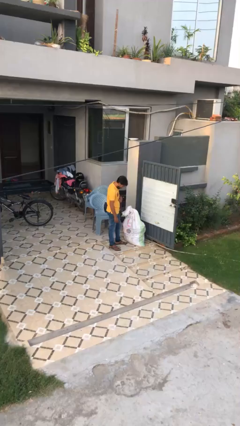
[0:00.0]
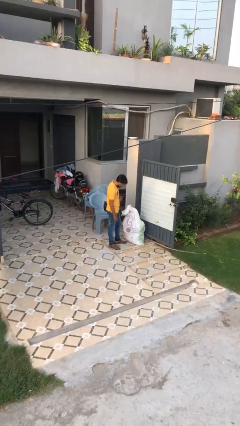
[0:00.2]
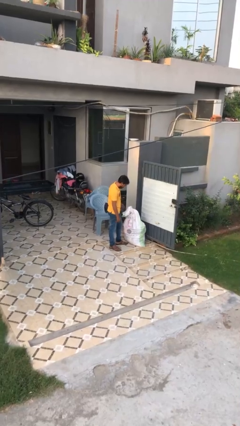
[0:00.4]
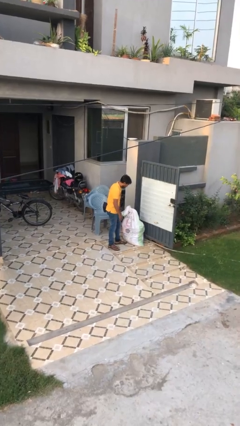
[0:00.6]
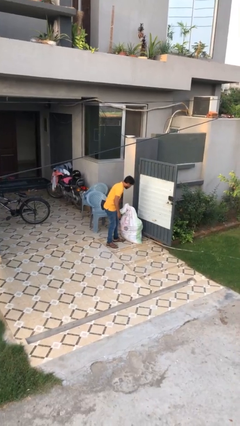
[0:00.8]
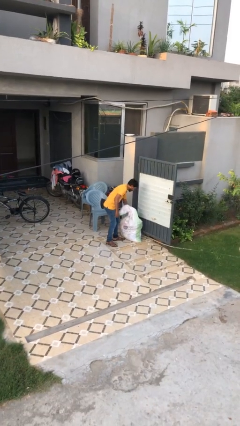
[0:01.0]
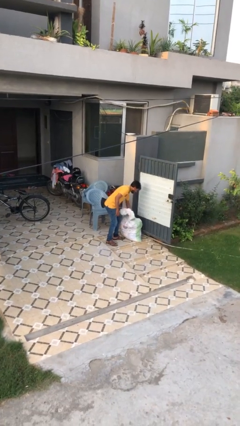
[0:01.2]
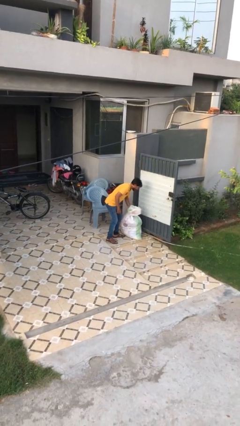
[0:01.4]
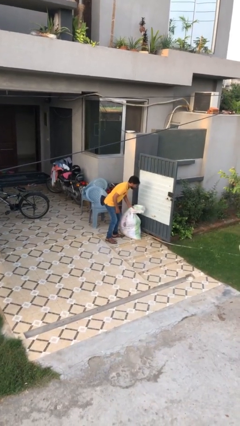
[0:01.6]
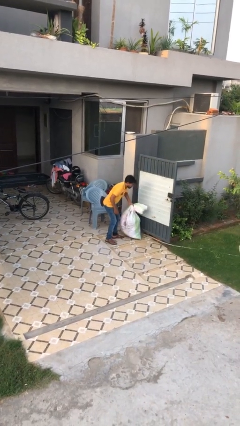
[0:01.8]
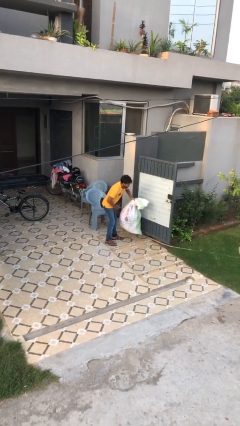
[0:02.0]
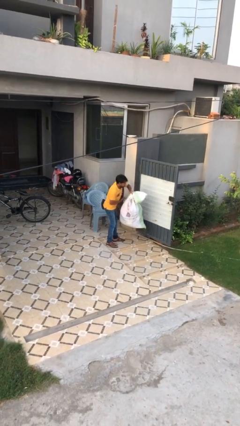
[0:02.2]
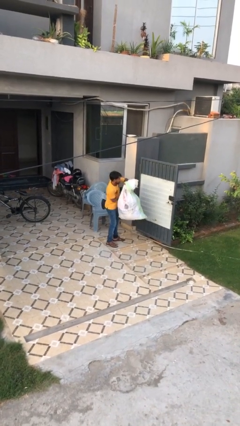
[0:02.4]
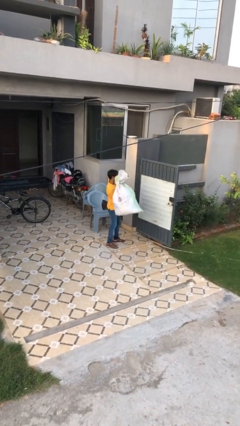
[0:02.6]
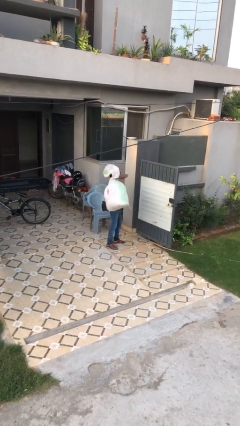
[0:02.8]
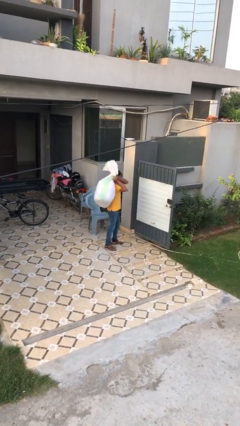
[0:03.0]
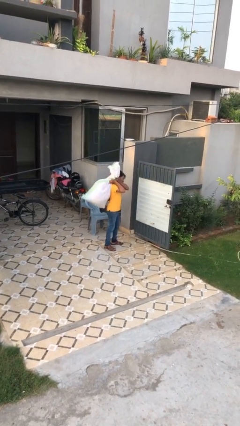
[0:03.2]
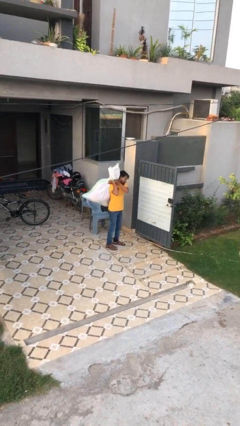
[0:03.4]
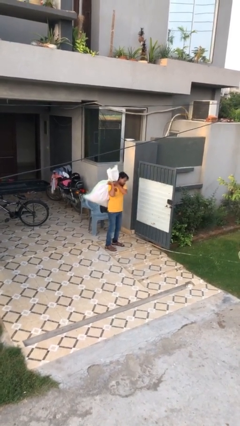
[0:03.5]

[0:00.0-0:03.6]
person picks up object from floor

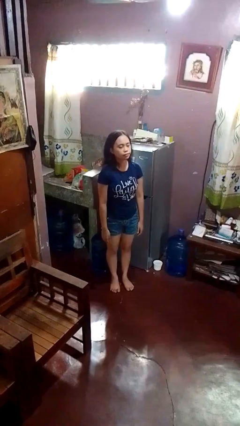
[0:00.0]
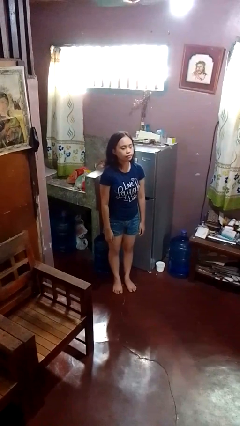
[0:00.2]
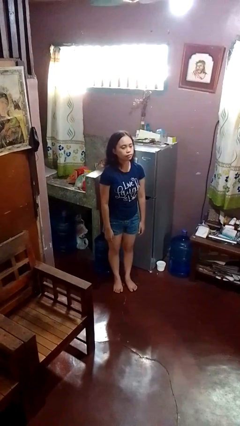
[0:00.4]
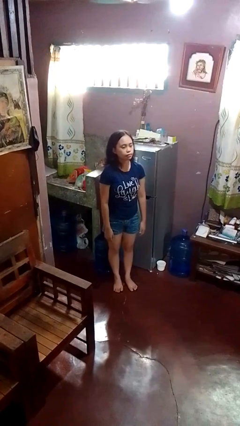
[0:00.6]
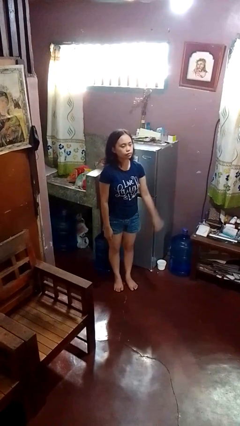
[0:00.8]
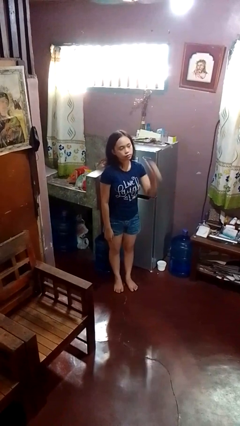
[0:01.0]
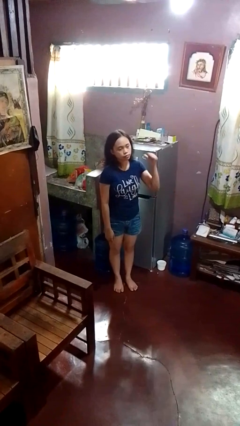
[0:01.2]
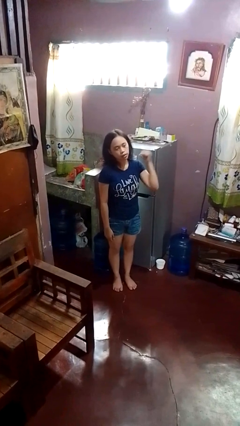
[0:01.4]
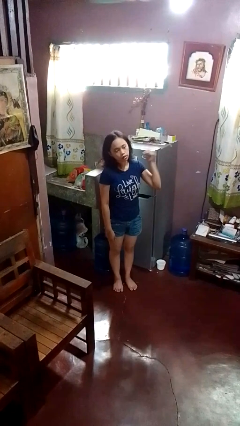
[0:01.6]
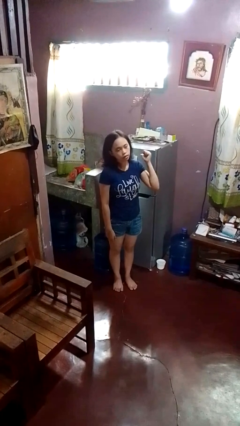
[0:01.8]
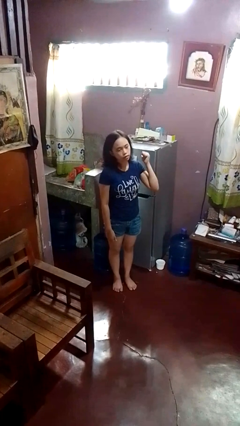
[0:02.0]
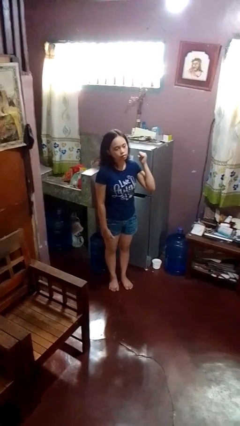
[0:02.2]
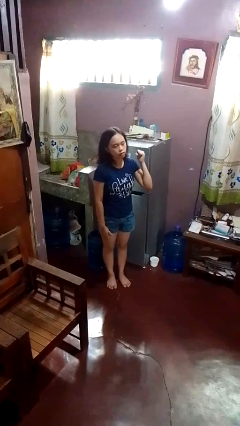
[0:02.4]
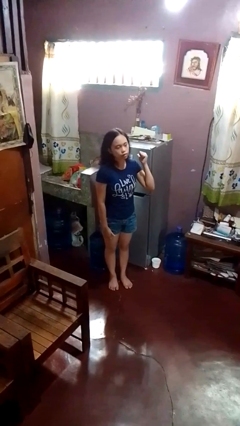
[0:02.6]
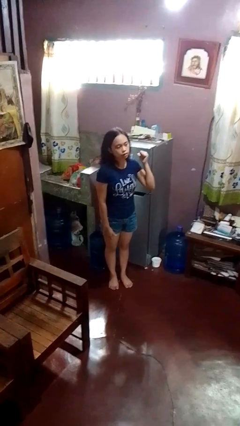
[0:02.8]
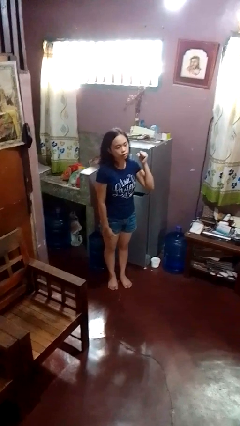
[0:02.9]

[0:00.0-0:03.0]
person gestures behind me

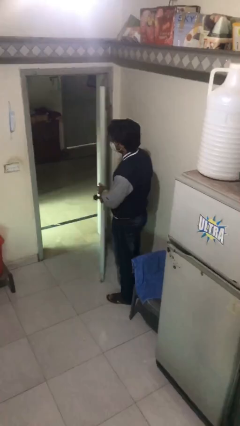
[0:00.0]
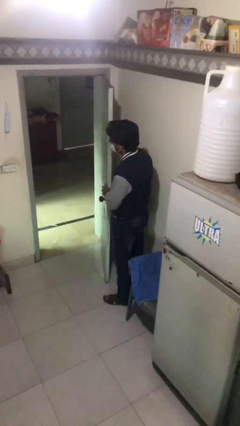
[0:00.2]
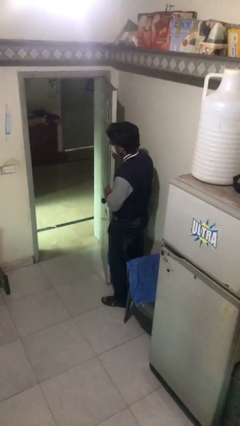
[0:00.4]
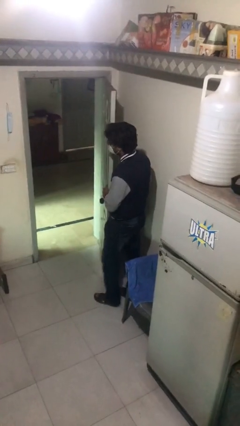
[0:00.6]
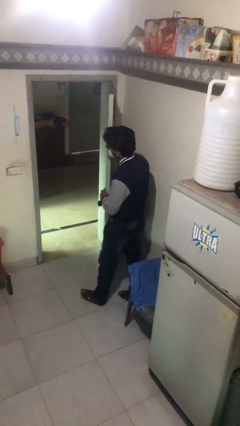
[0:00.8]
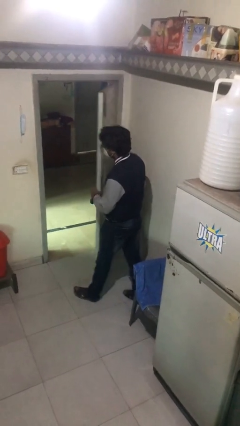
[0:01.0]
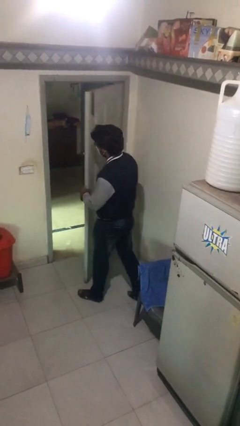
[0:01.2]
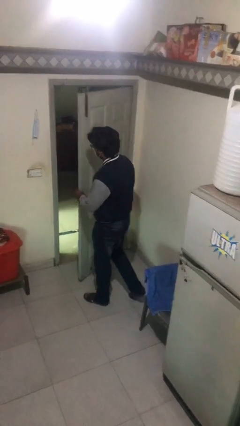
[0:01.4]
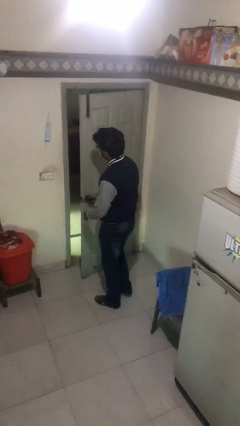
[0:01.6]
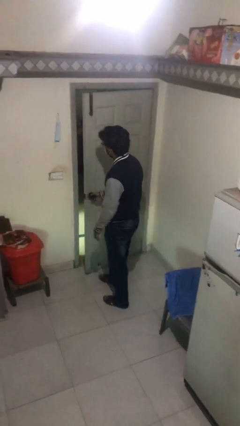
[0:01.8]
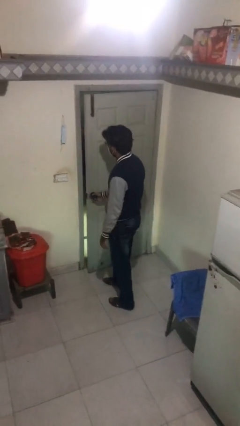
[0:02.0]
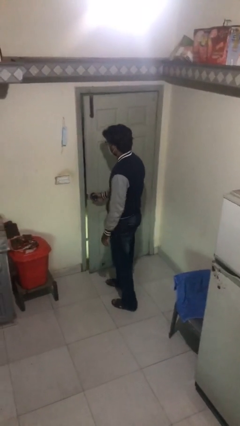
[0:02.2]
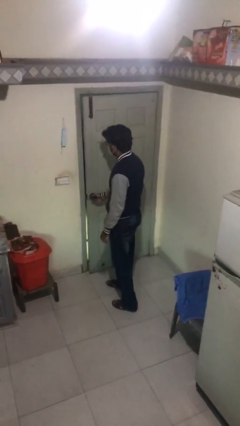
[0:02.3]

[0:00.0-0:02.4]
person closes facility door

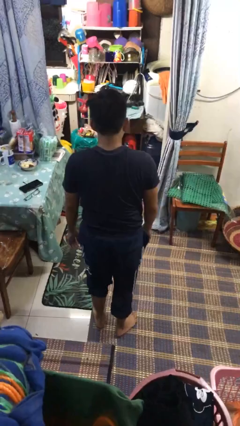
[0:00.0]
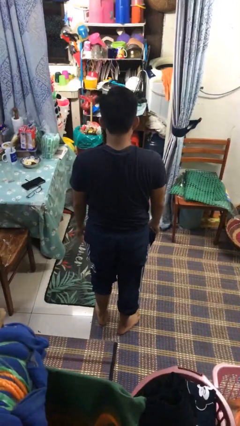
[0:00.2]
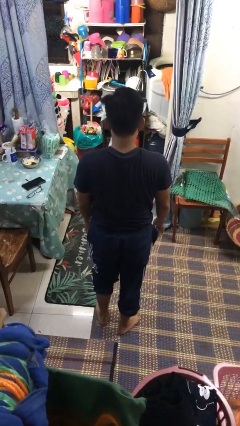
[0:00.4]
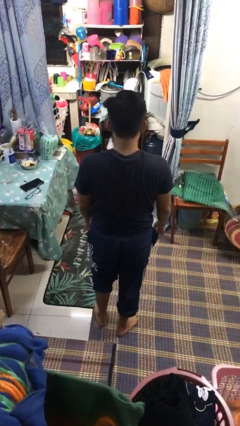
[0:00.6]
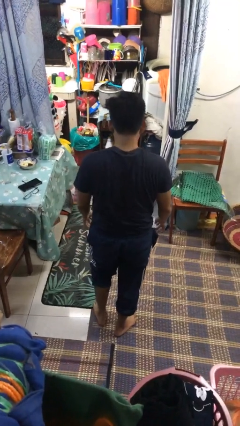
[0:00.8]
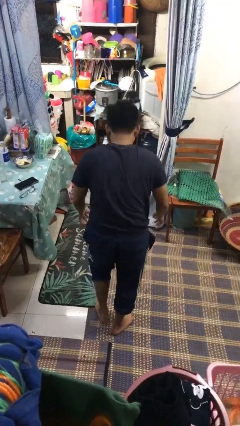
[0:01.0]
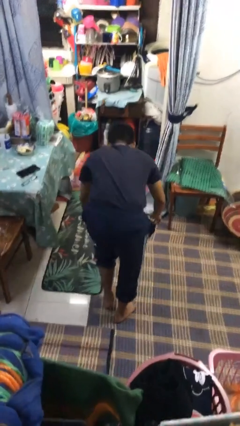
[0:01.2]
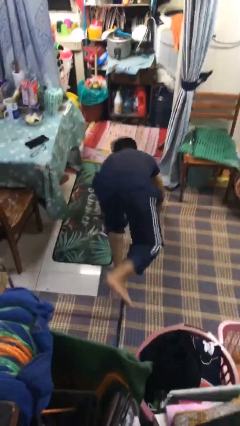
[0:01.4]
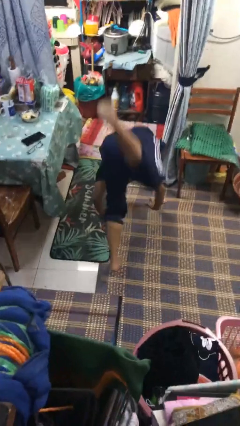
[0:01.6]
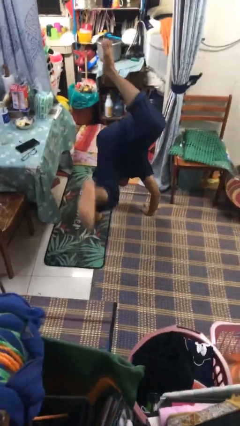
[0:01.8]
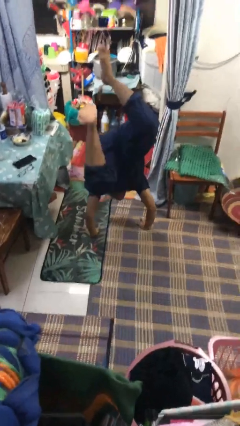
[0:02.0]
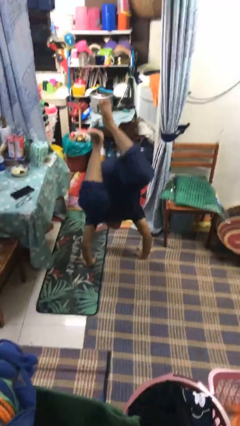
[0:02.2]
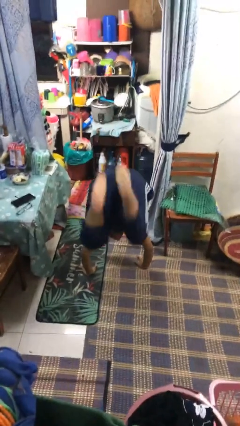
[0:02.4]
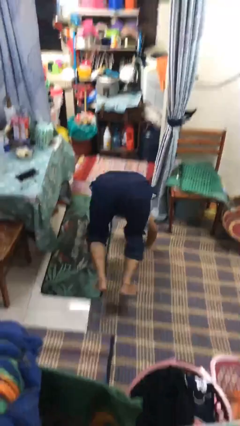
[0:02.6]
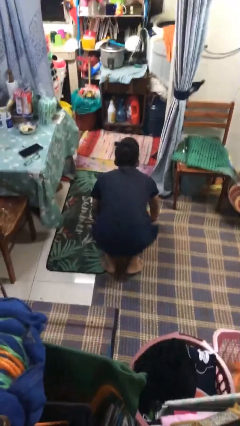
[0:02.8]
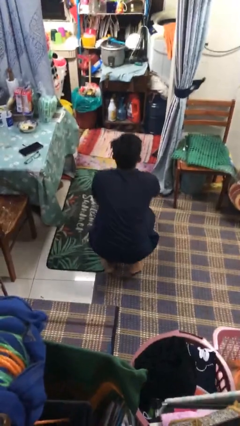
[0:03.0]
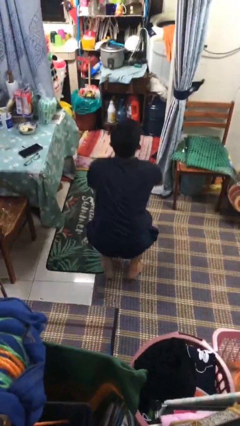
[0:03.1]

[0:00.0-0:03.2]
person handstand

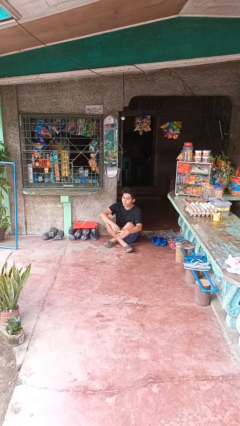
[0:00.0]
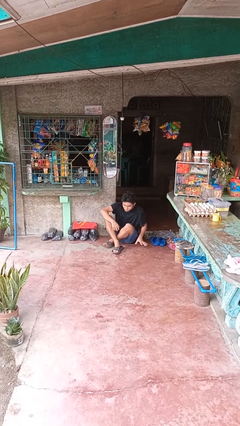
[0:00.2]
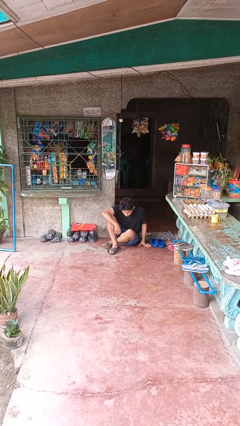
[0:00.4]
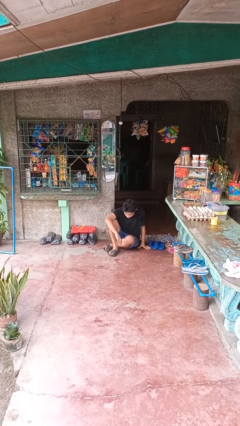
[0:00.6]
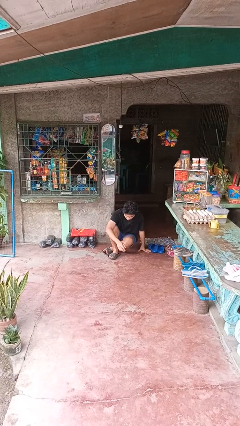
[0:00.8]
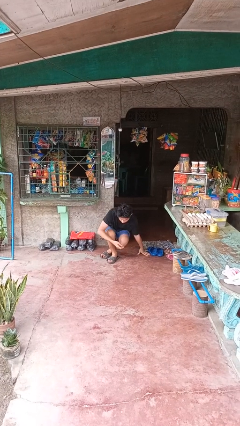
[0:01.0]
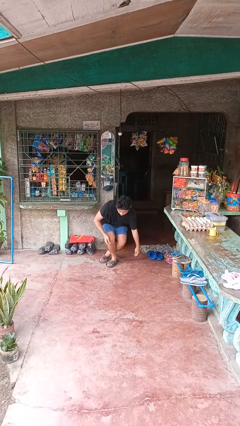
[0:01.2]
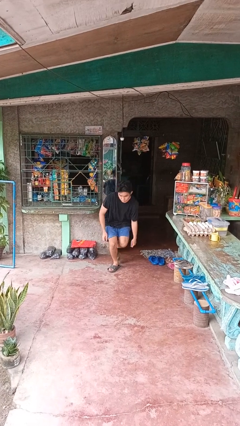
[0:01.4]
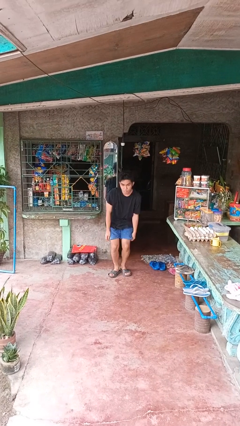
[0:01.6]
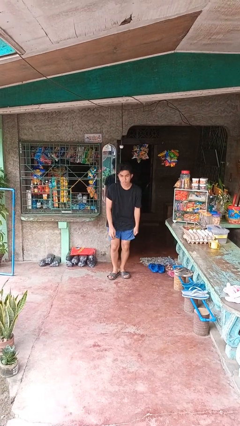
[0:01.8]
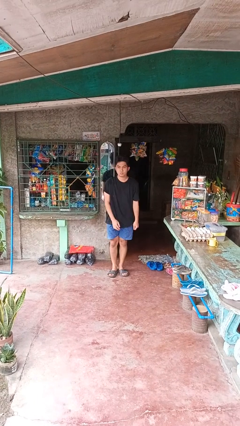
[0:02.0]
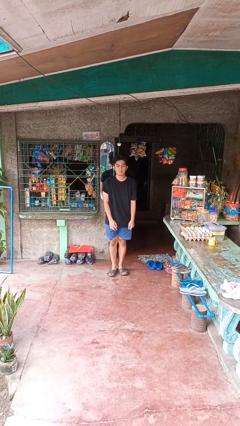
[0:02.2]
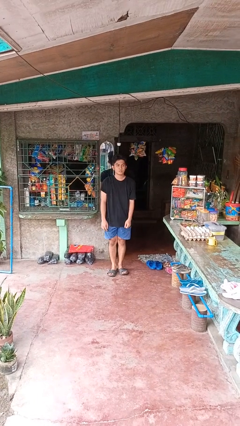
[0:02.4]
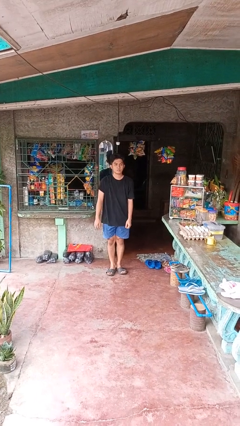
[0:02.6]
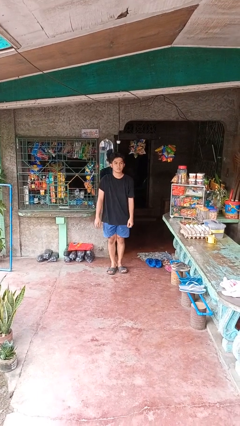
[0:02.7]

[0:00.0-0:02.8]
person stands up from floor

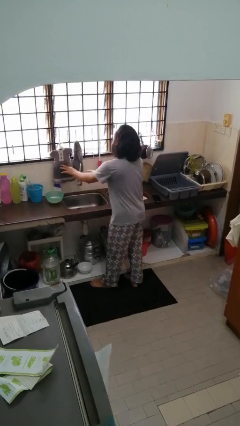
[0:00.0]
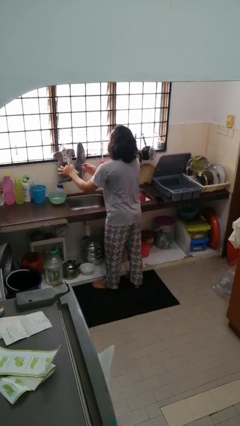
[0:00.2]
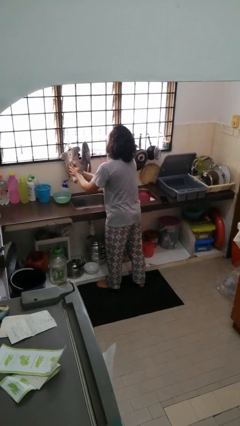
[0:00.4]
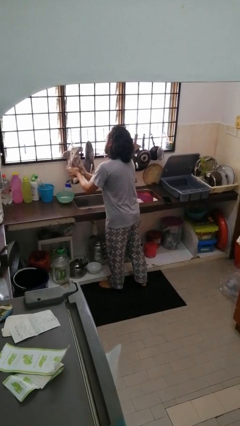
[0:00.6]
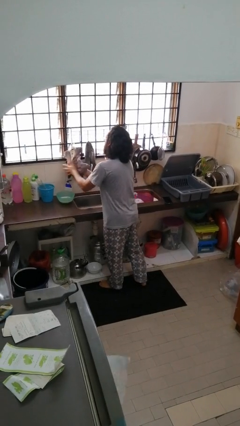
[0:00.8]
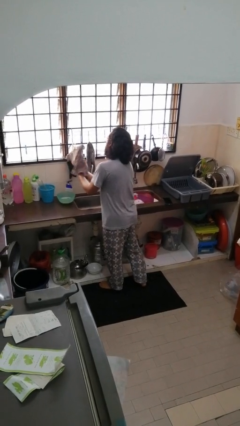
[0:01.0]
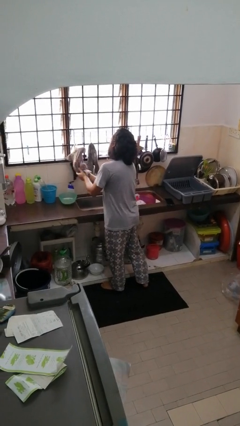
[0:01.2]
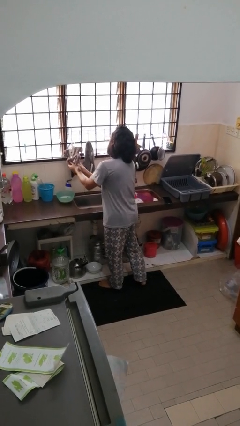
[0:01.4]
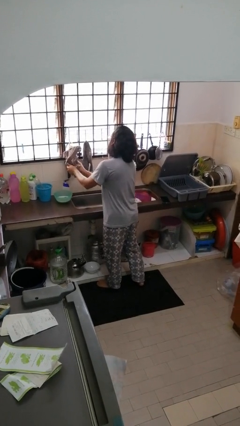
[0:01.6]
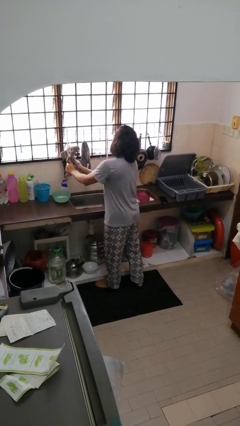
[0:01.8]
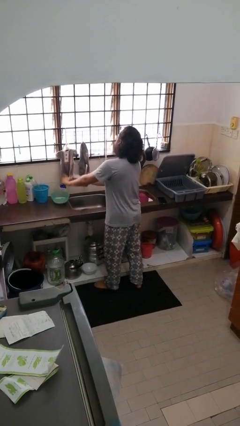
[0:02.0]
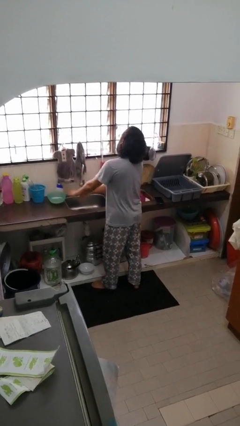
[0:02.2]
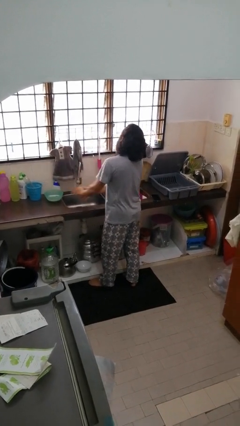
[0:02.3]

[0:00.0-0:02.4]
person dries hands with towel
